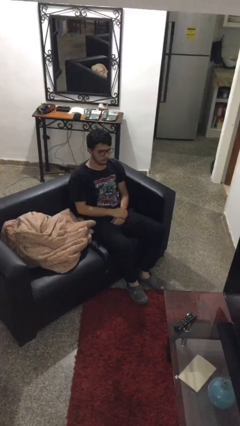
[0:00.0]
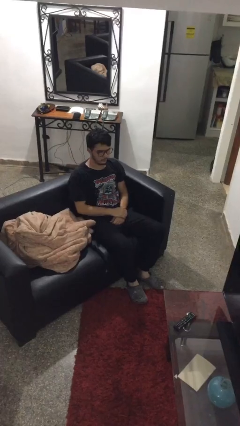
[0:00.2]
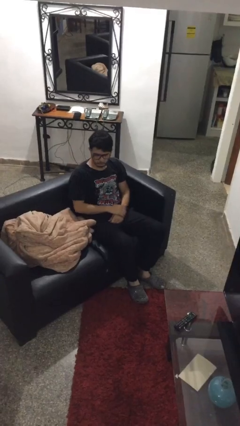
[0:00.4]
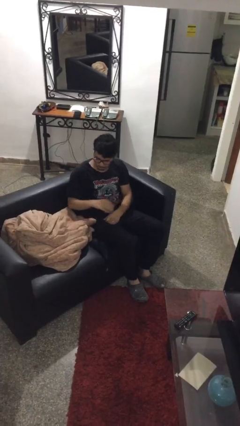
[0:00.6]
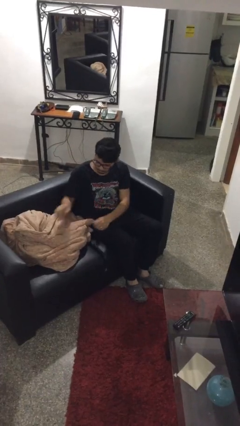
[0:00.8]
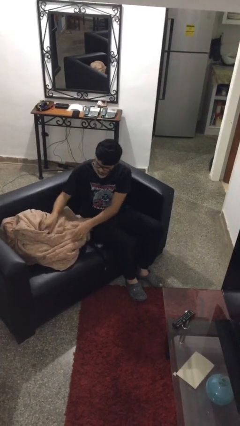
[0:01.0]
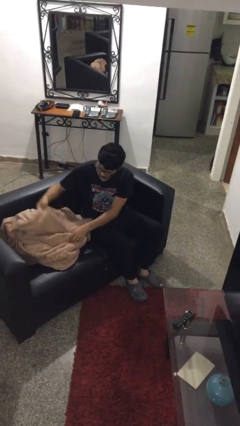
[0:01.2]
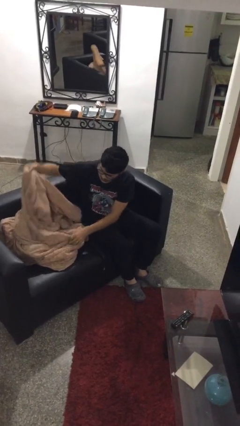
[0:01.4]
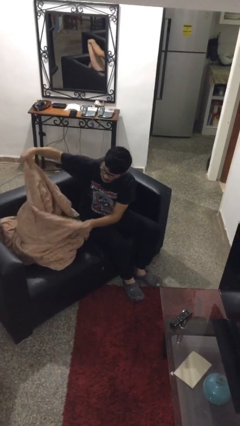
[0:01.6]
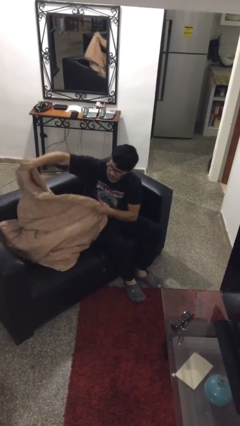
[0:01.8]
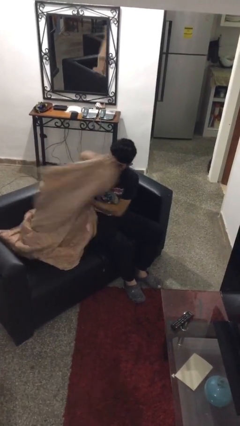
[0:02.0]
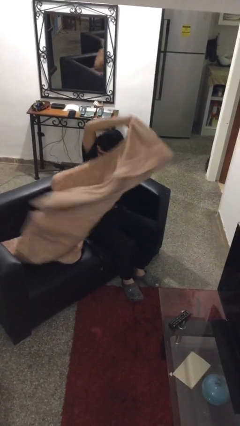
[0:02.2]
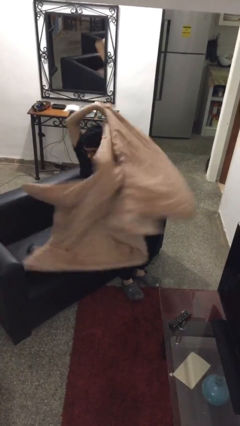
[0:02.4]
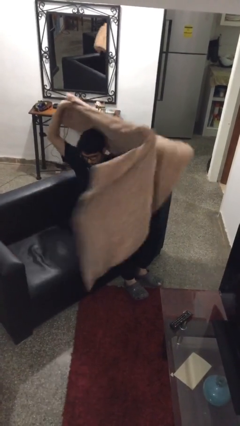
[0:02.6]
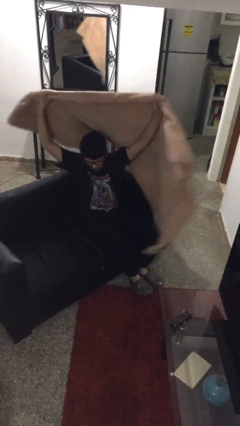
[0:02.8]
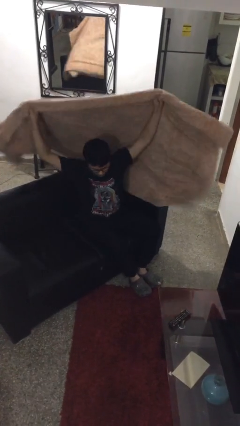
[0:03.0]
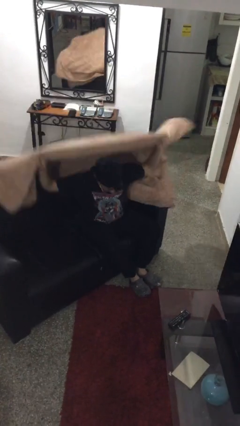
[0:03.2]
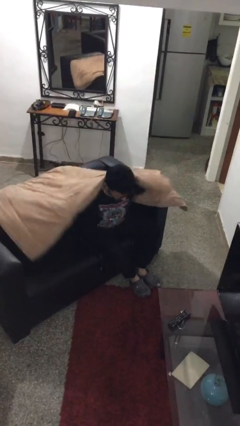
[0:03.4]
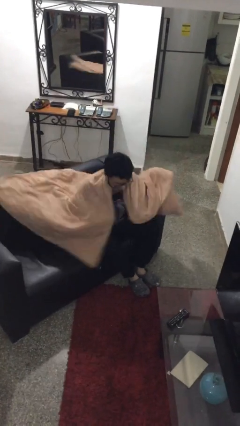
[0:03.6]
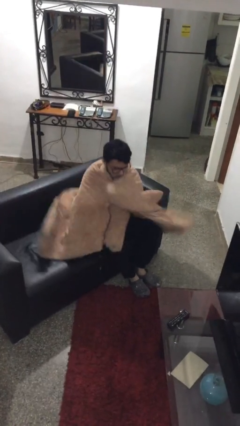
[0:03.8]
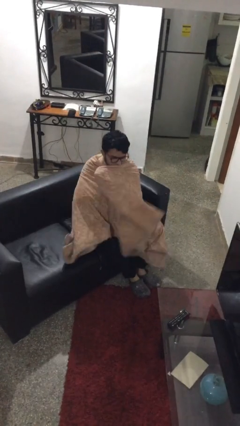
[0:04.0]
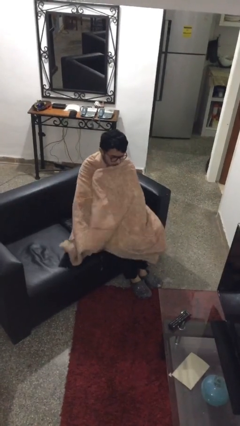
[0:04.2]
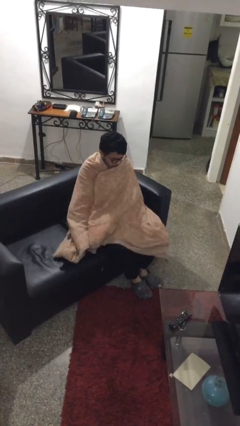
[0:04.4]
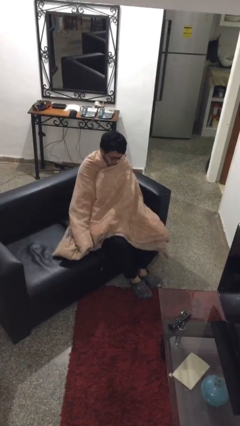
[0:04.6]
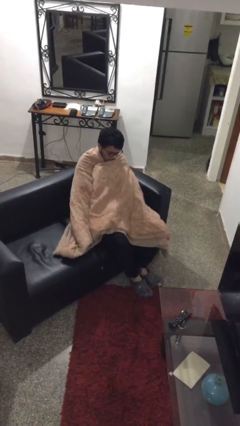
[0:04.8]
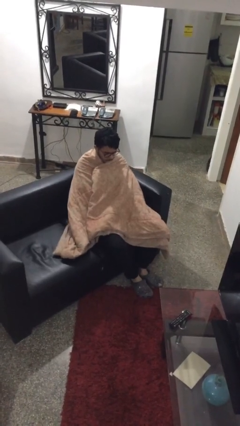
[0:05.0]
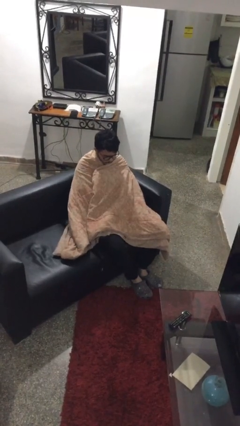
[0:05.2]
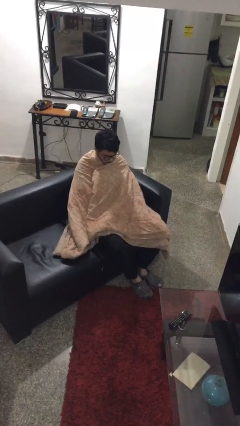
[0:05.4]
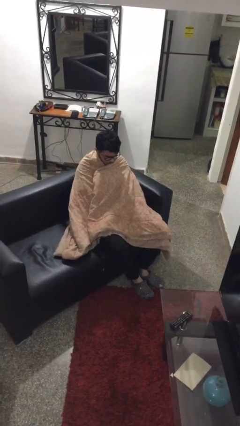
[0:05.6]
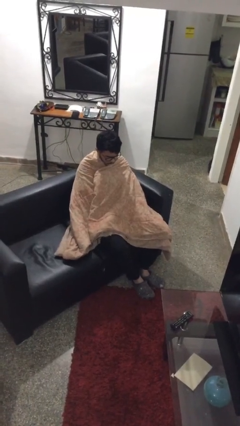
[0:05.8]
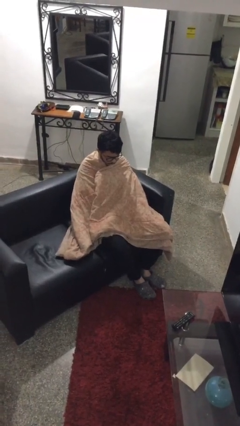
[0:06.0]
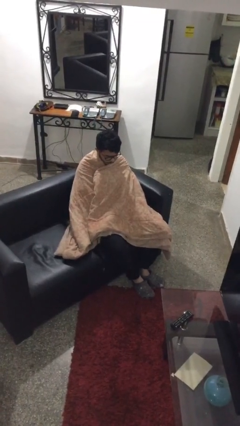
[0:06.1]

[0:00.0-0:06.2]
person covers with blanket

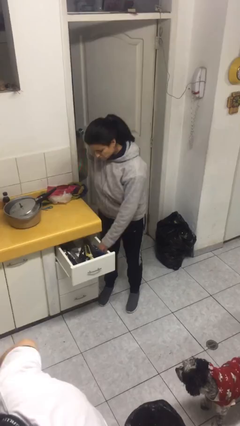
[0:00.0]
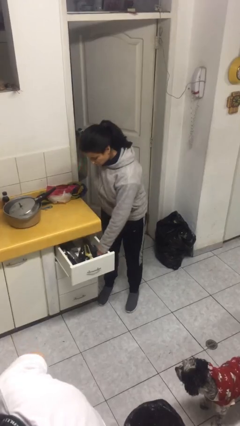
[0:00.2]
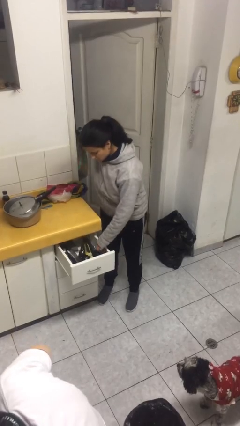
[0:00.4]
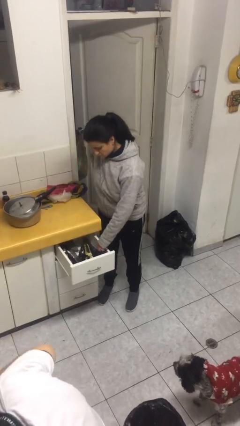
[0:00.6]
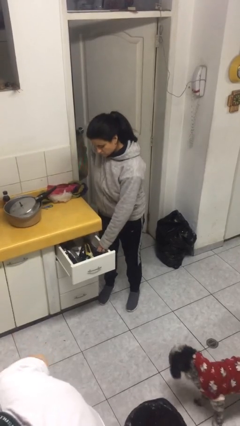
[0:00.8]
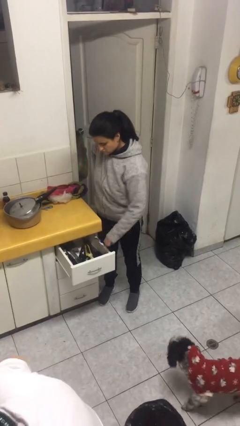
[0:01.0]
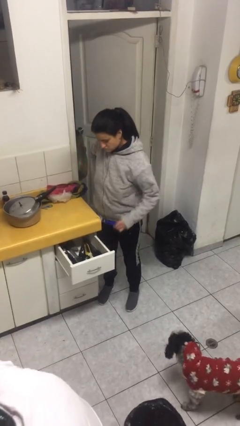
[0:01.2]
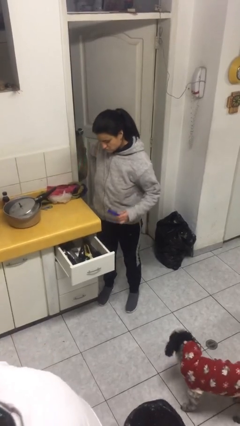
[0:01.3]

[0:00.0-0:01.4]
person takes object from kitchen drawer

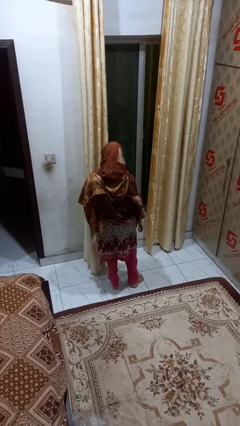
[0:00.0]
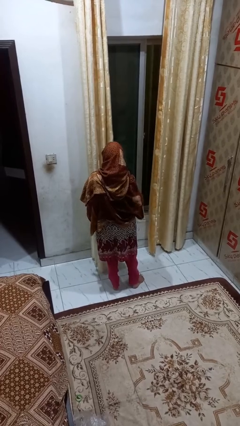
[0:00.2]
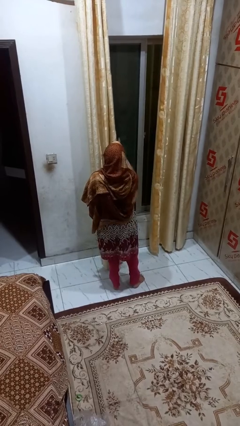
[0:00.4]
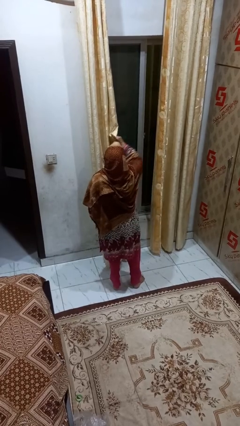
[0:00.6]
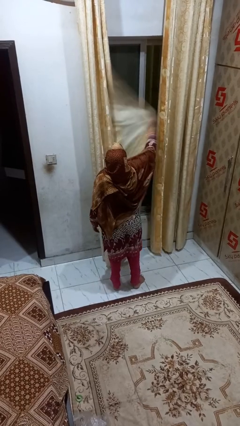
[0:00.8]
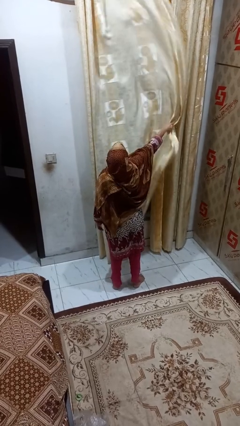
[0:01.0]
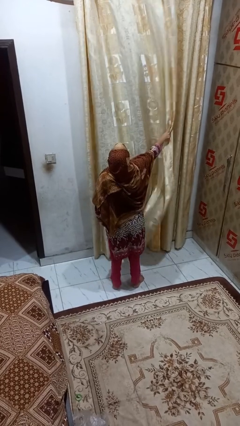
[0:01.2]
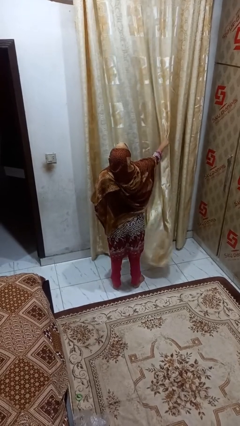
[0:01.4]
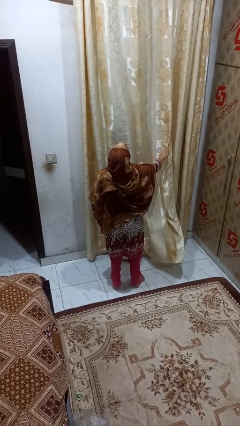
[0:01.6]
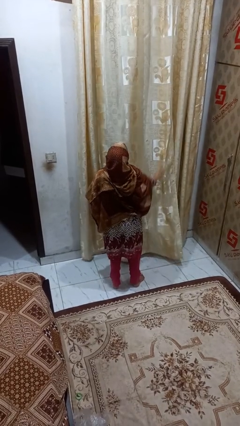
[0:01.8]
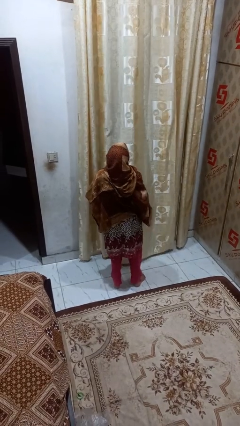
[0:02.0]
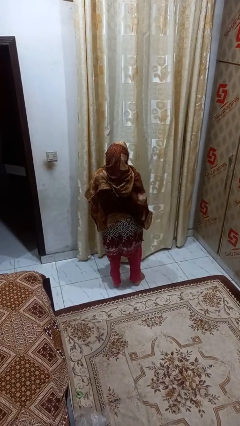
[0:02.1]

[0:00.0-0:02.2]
person closes curtains

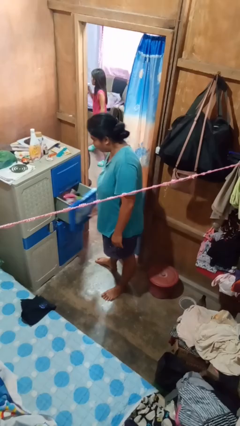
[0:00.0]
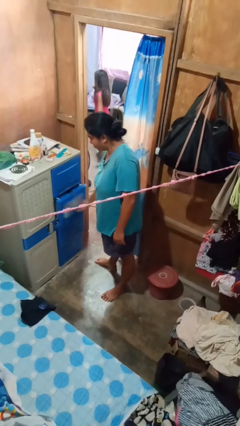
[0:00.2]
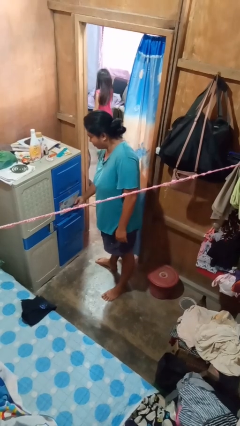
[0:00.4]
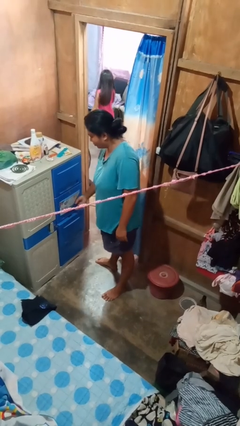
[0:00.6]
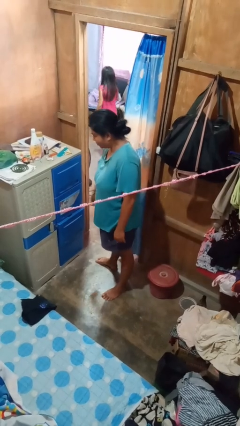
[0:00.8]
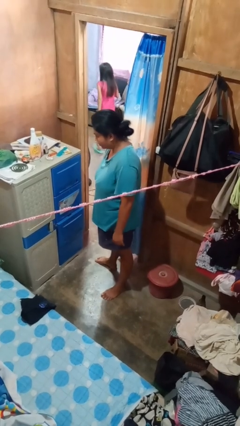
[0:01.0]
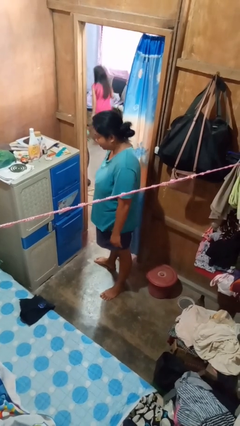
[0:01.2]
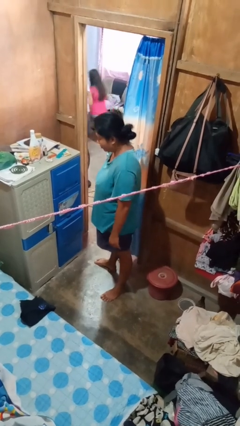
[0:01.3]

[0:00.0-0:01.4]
person closes dresser drawer

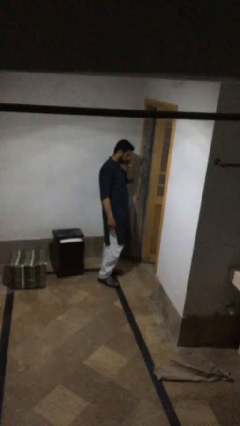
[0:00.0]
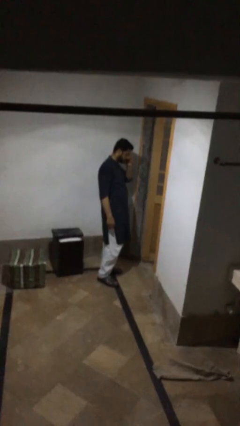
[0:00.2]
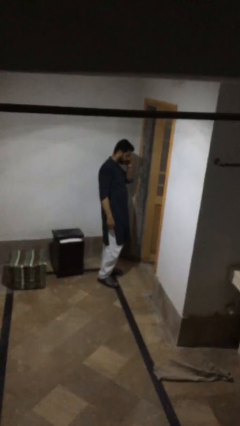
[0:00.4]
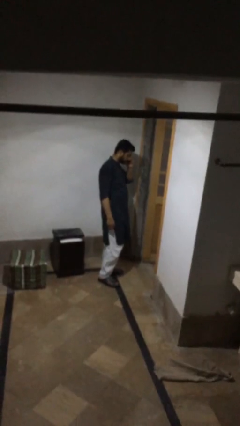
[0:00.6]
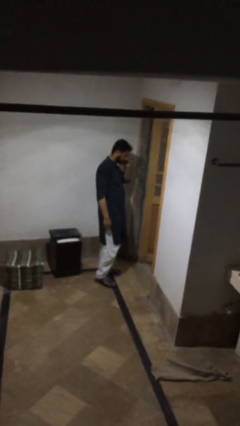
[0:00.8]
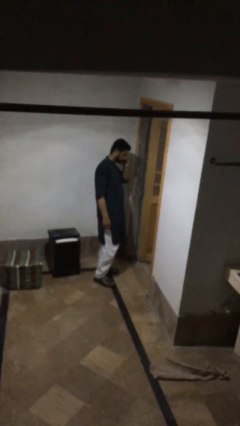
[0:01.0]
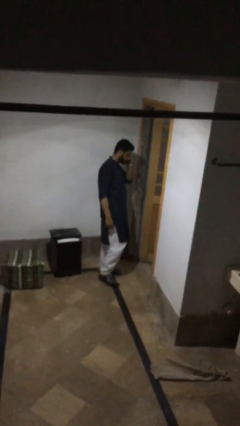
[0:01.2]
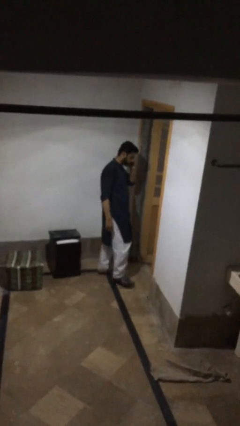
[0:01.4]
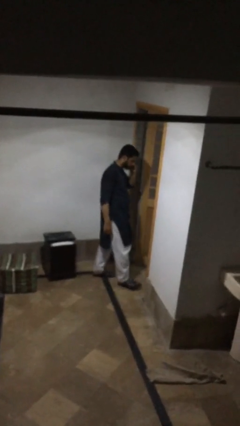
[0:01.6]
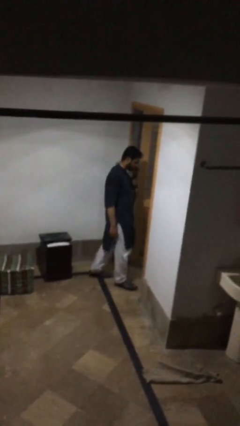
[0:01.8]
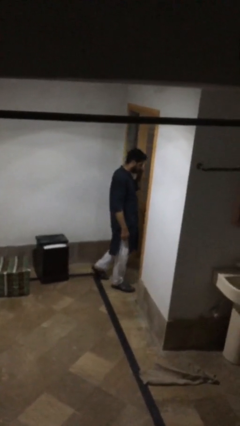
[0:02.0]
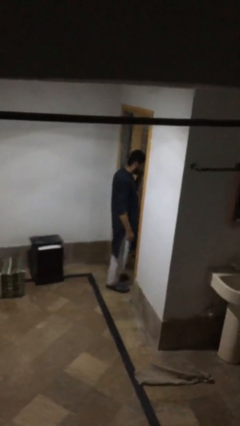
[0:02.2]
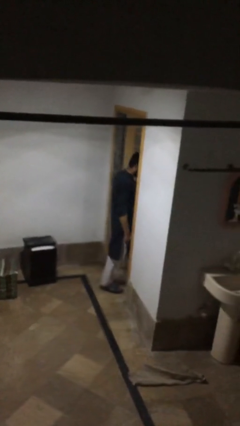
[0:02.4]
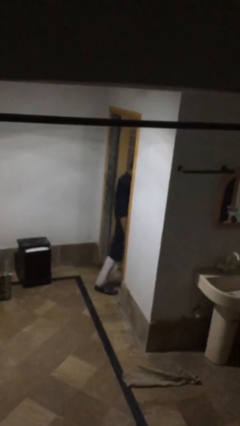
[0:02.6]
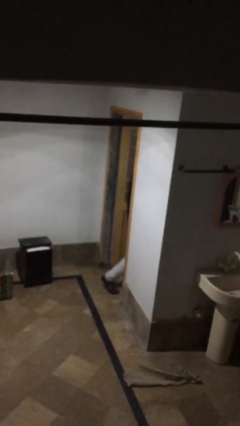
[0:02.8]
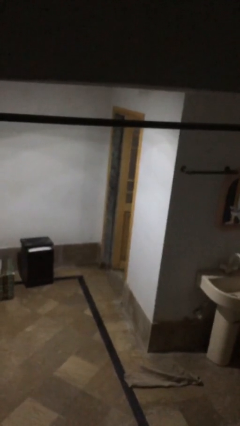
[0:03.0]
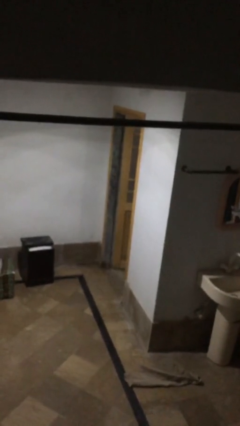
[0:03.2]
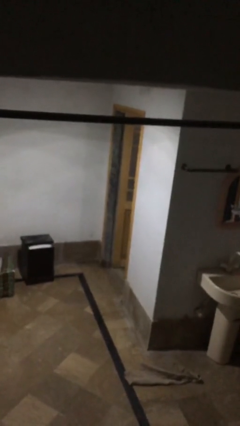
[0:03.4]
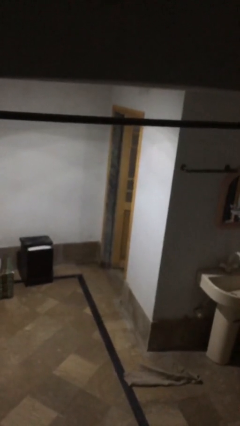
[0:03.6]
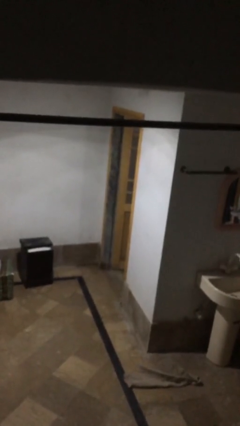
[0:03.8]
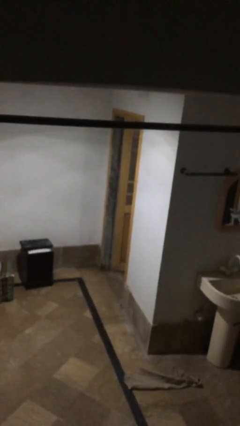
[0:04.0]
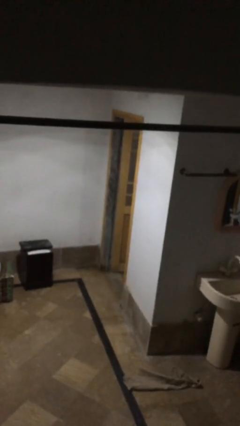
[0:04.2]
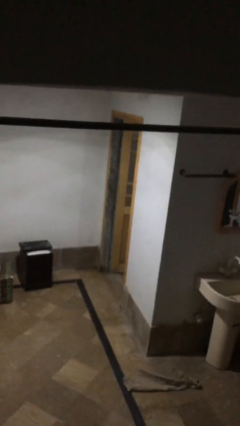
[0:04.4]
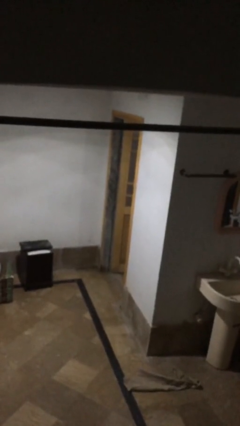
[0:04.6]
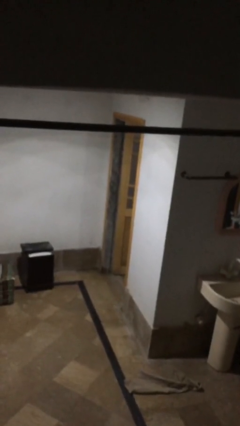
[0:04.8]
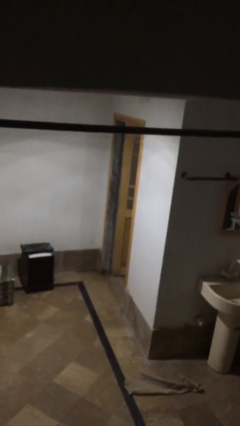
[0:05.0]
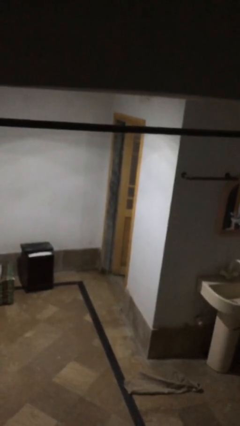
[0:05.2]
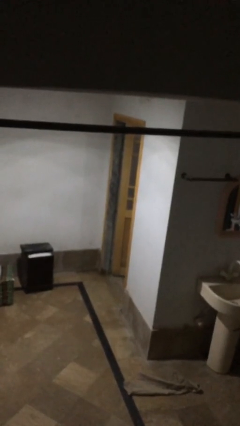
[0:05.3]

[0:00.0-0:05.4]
person exits scene through structure

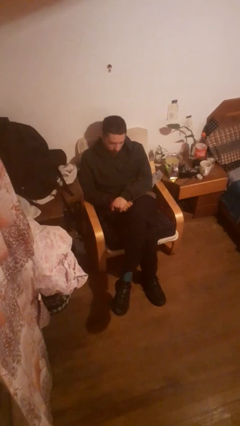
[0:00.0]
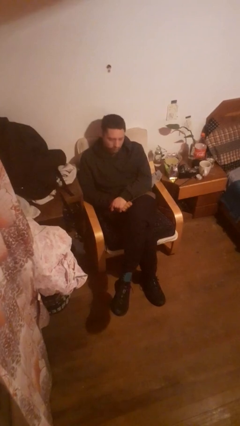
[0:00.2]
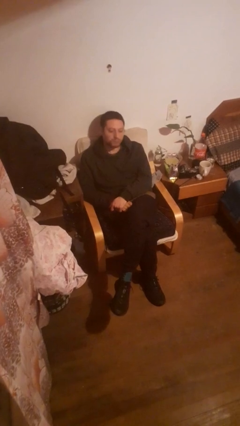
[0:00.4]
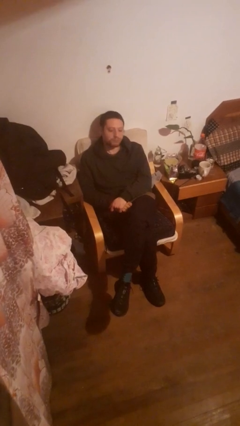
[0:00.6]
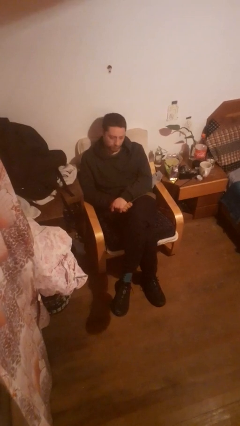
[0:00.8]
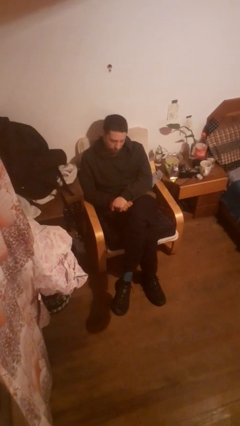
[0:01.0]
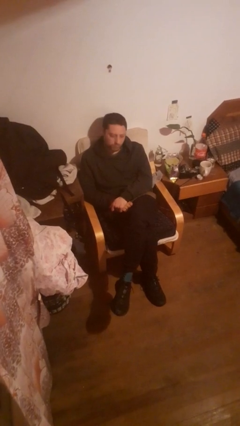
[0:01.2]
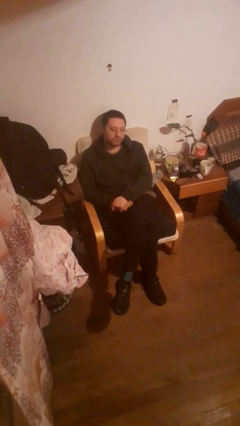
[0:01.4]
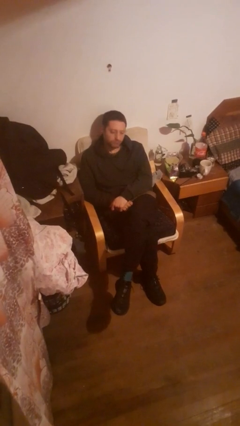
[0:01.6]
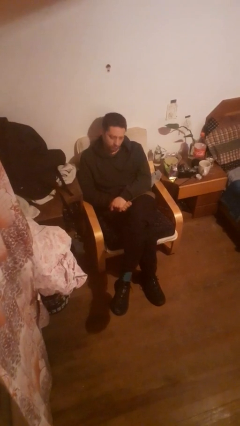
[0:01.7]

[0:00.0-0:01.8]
person nods head
